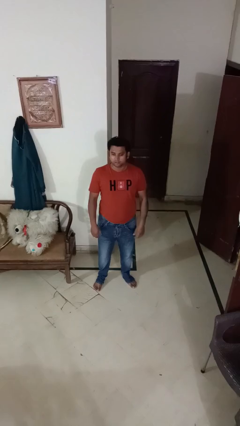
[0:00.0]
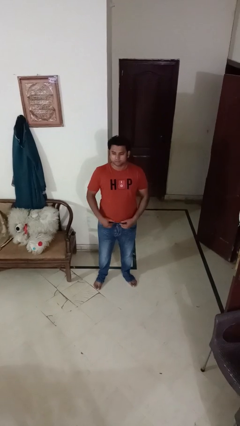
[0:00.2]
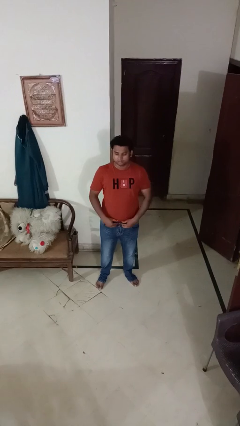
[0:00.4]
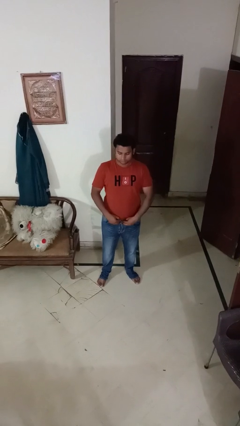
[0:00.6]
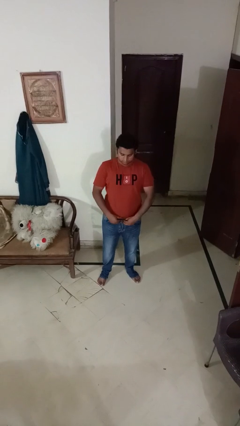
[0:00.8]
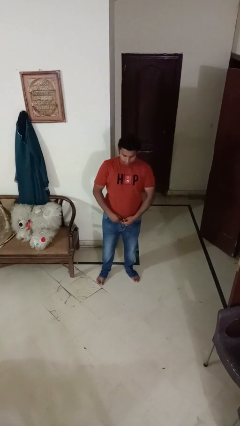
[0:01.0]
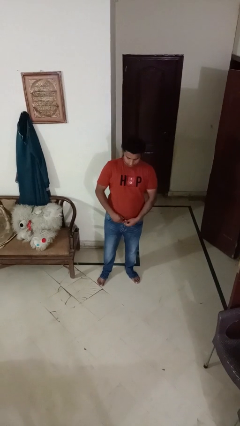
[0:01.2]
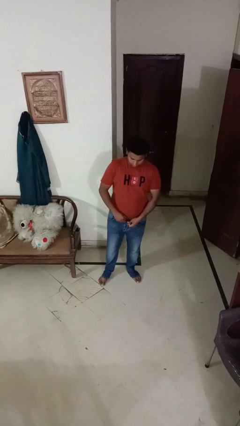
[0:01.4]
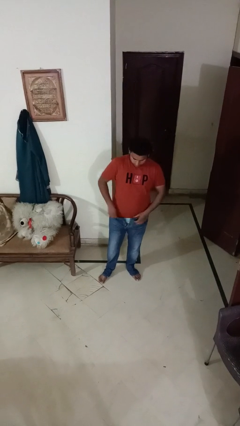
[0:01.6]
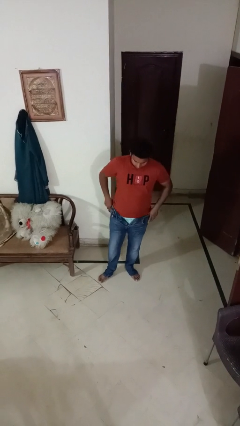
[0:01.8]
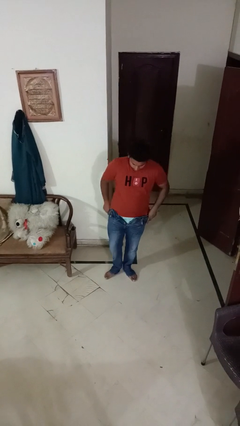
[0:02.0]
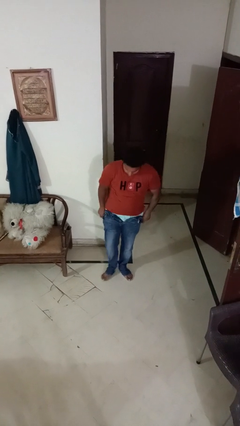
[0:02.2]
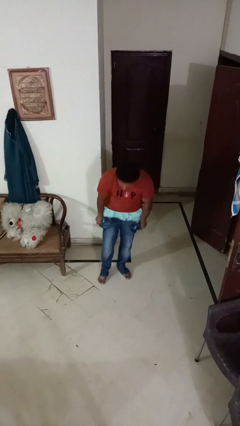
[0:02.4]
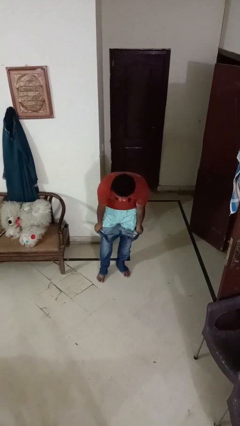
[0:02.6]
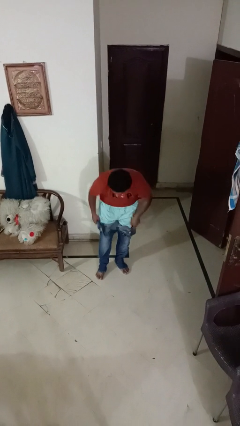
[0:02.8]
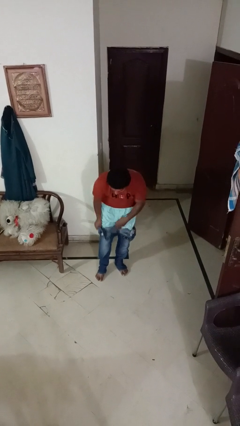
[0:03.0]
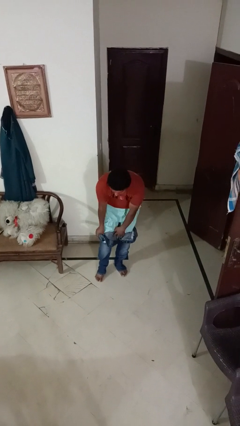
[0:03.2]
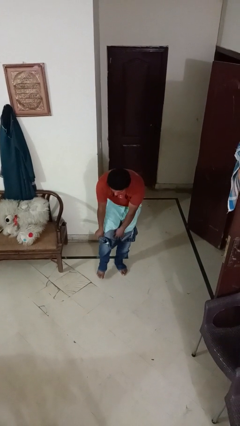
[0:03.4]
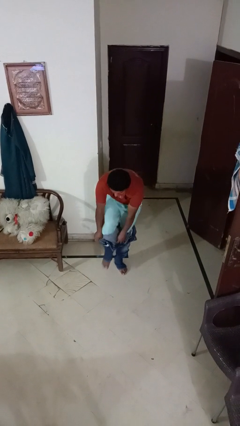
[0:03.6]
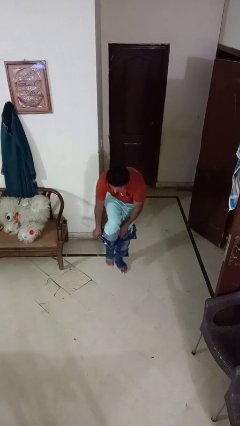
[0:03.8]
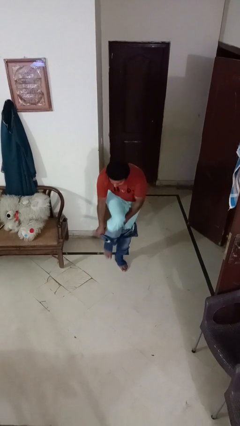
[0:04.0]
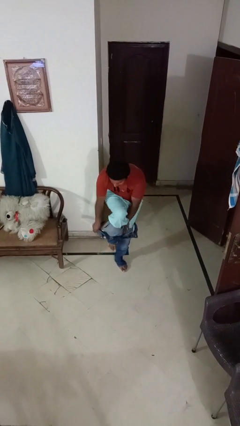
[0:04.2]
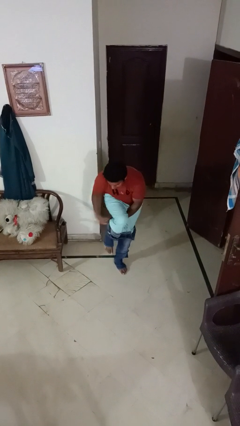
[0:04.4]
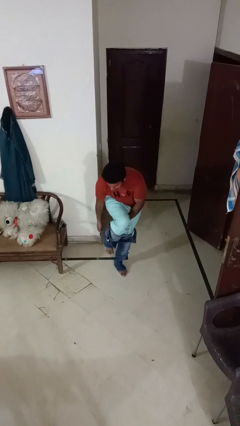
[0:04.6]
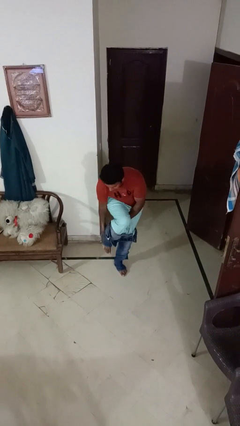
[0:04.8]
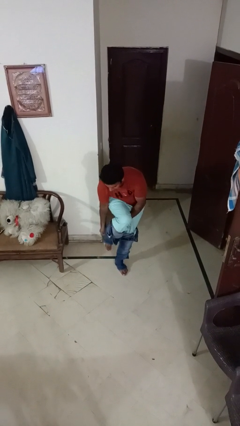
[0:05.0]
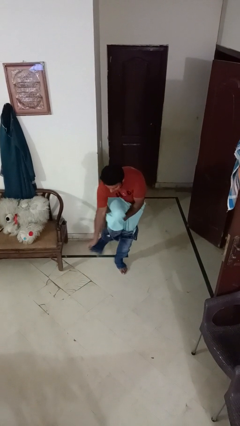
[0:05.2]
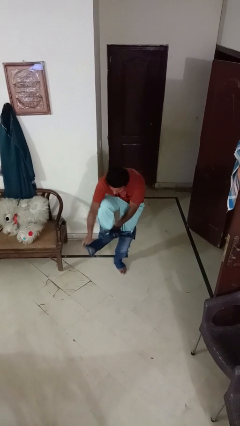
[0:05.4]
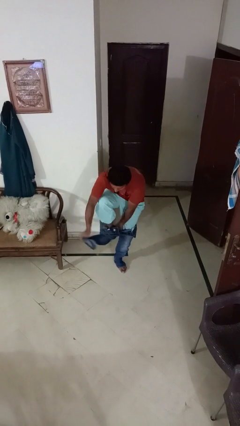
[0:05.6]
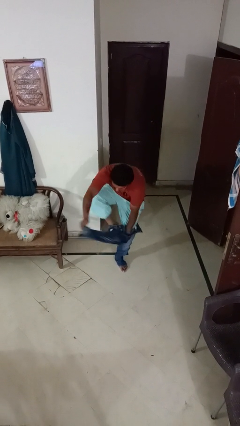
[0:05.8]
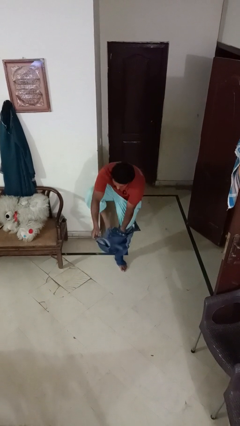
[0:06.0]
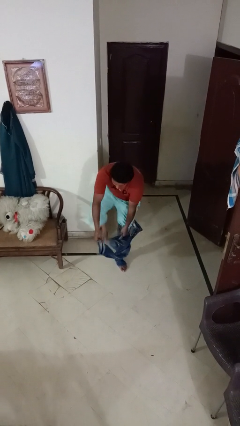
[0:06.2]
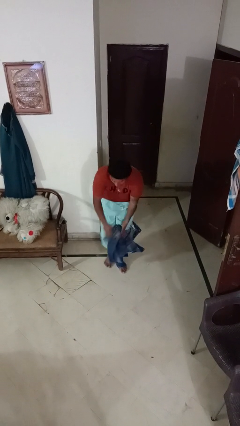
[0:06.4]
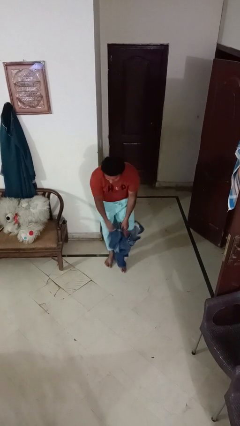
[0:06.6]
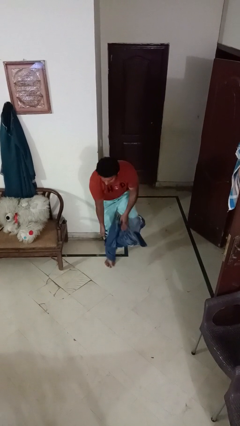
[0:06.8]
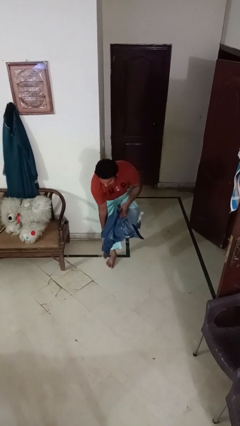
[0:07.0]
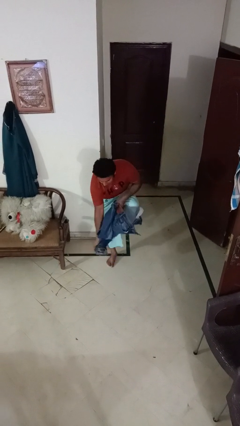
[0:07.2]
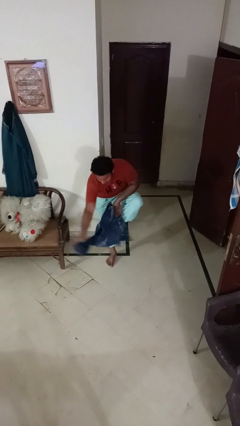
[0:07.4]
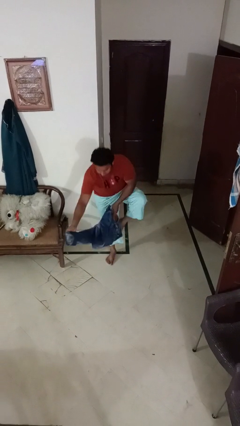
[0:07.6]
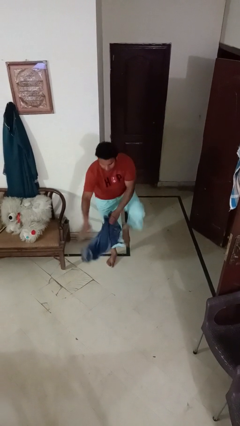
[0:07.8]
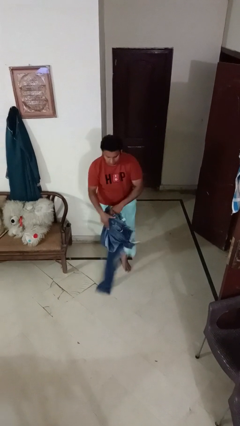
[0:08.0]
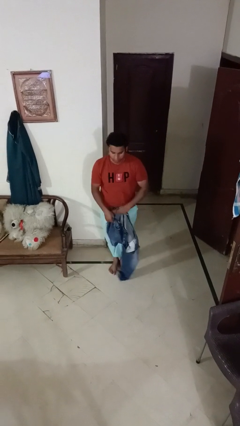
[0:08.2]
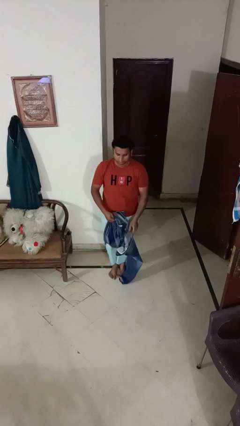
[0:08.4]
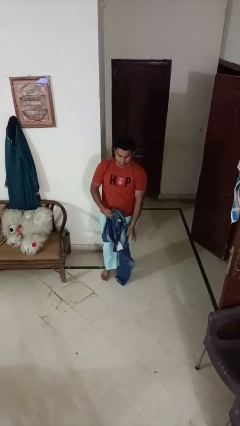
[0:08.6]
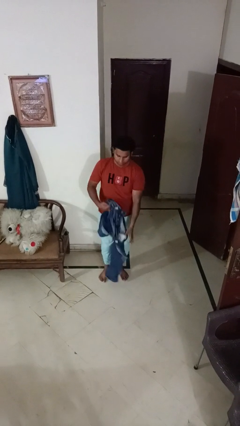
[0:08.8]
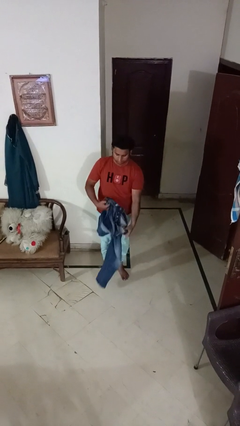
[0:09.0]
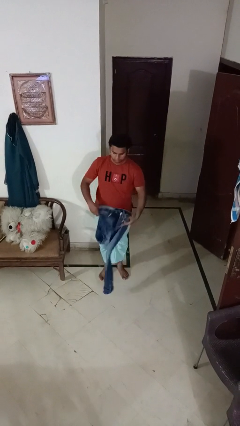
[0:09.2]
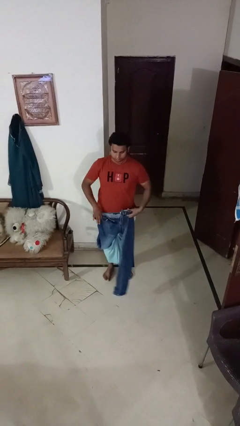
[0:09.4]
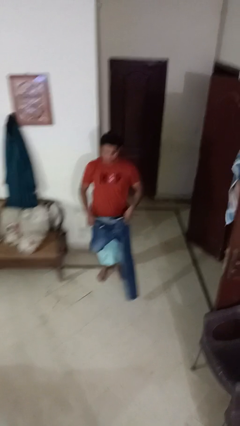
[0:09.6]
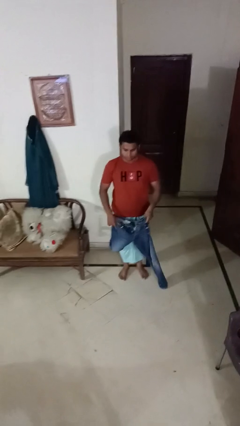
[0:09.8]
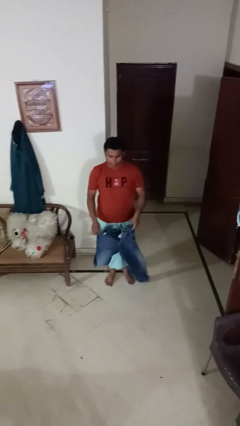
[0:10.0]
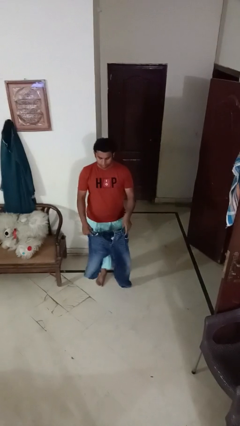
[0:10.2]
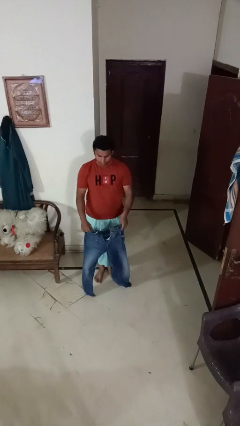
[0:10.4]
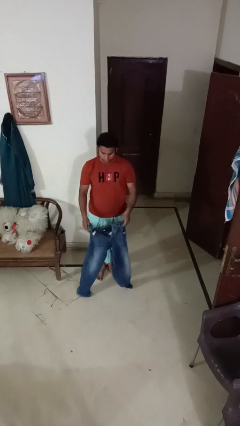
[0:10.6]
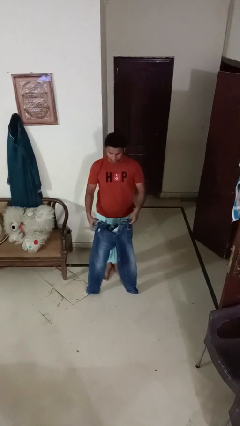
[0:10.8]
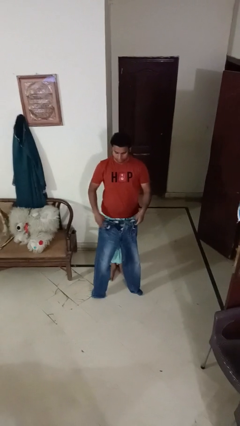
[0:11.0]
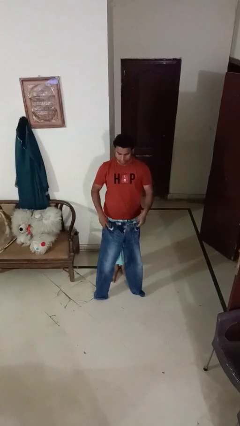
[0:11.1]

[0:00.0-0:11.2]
person takes off pants

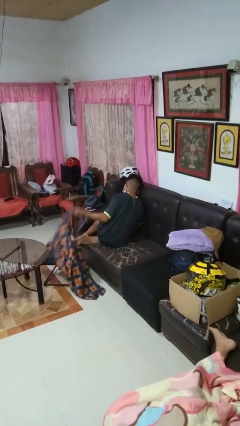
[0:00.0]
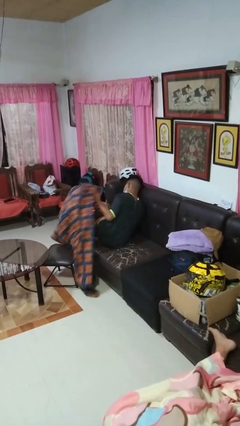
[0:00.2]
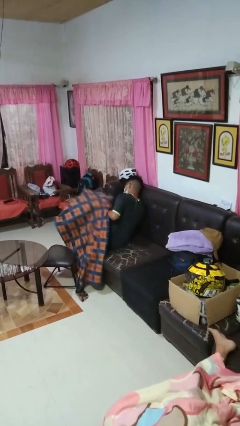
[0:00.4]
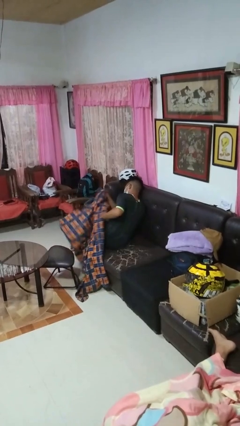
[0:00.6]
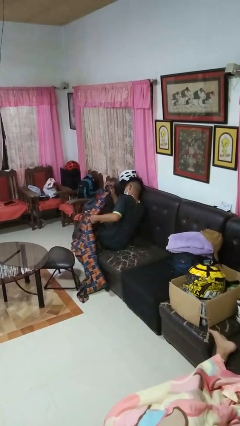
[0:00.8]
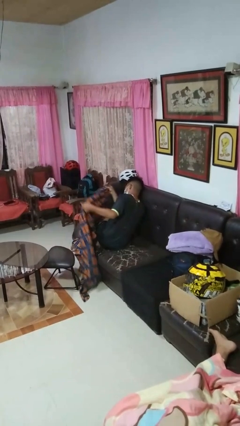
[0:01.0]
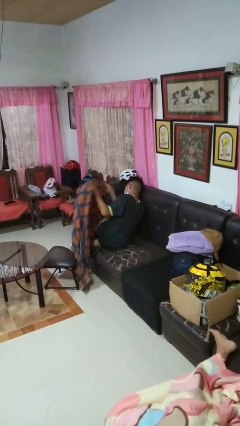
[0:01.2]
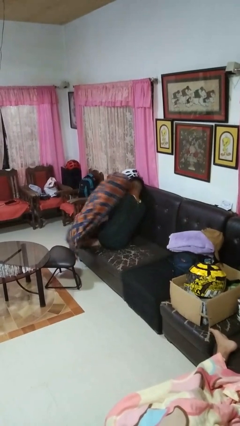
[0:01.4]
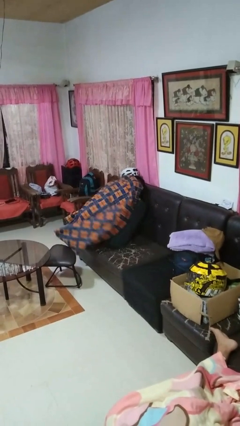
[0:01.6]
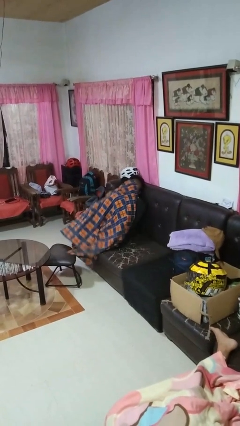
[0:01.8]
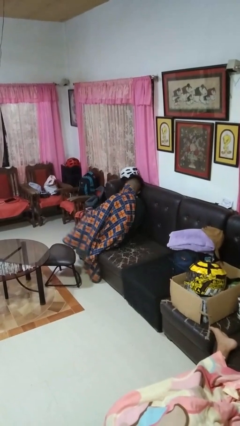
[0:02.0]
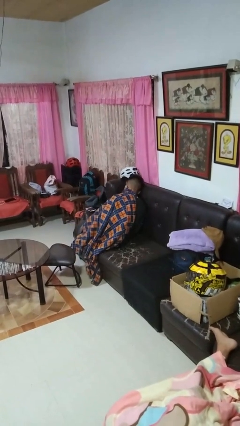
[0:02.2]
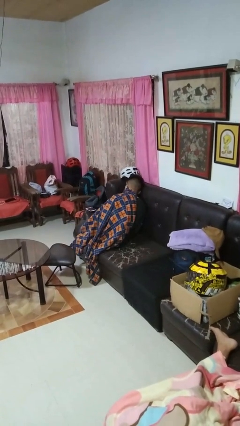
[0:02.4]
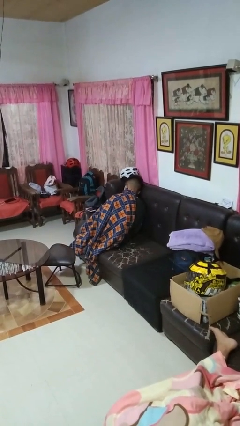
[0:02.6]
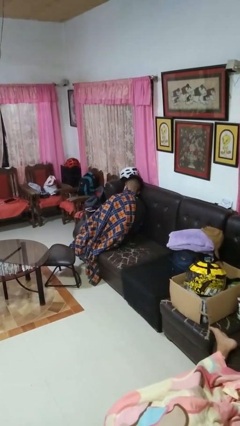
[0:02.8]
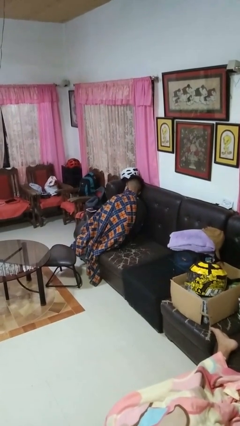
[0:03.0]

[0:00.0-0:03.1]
person covers with blanket

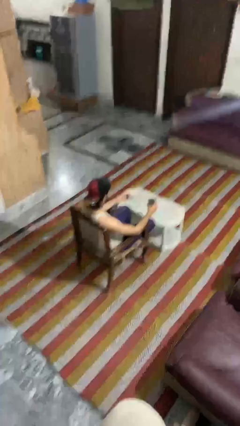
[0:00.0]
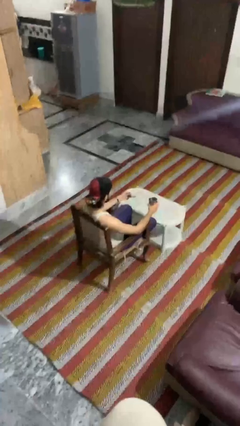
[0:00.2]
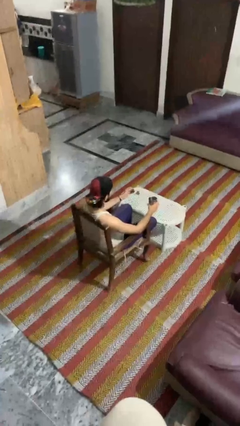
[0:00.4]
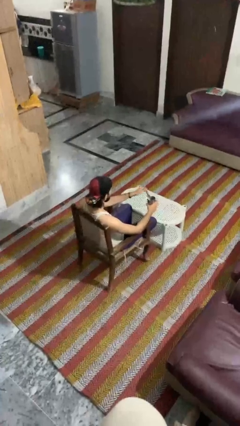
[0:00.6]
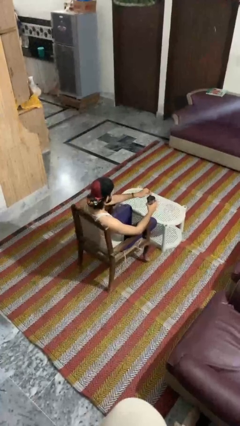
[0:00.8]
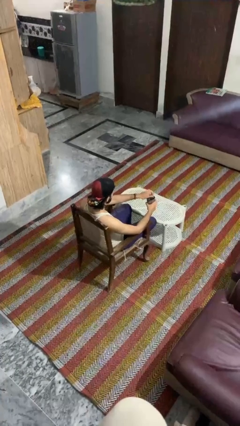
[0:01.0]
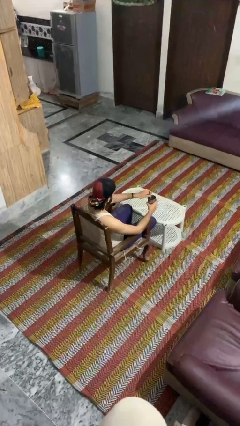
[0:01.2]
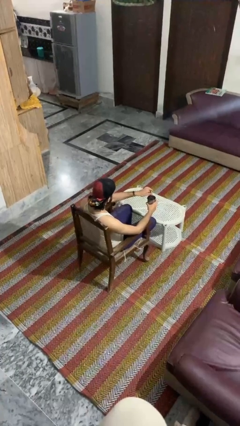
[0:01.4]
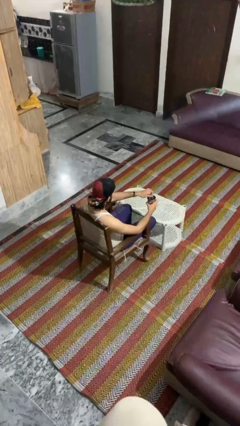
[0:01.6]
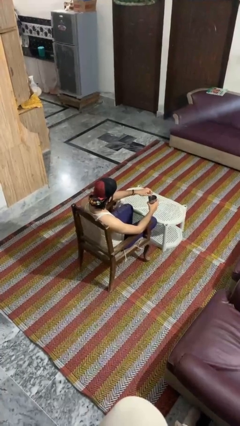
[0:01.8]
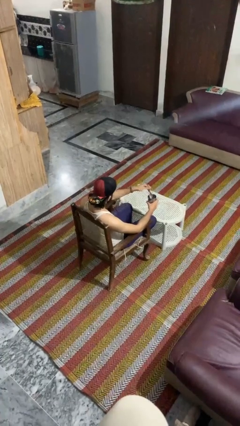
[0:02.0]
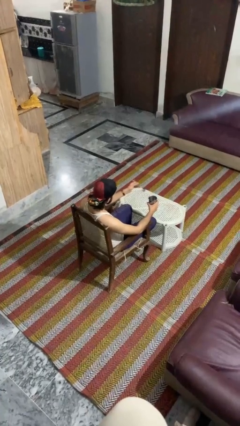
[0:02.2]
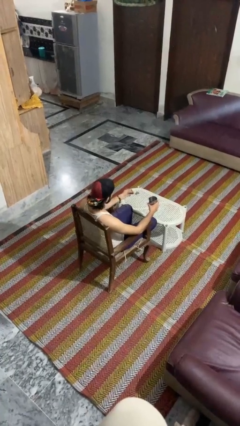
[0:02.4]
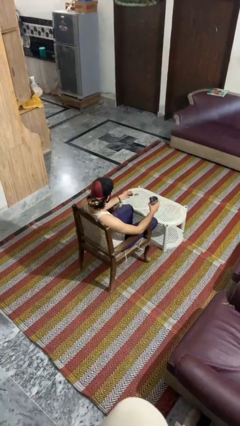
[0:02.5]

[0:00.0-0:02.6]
person stirs mug

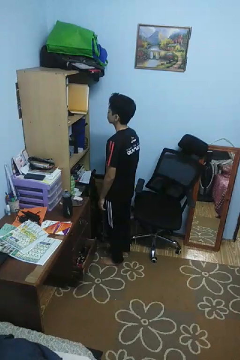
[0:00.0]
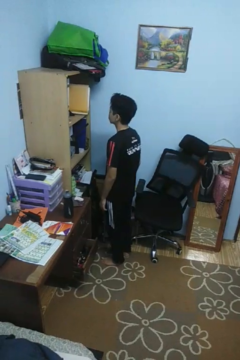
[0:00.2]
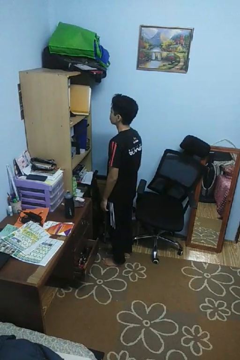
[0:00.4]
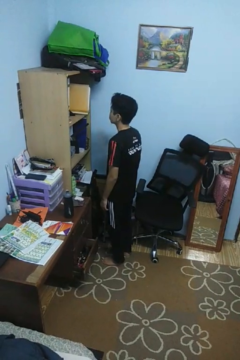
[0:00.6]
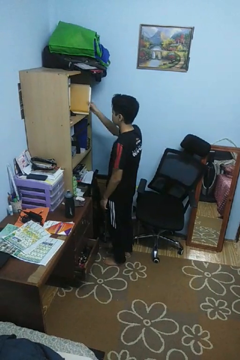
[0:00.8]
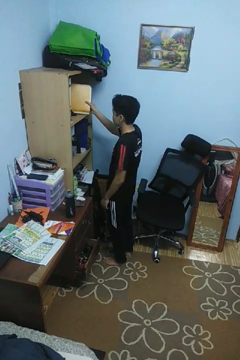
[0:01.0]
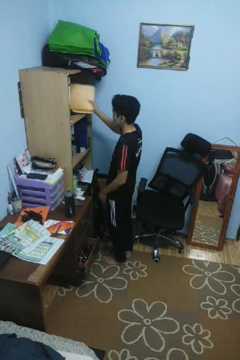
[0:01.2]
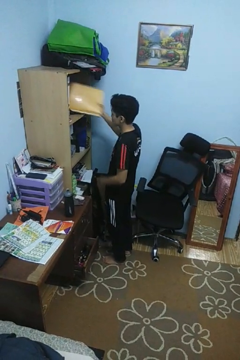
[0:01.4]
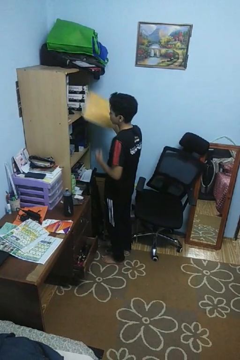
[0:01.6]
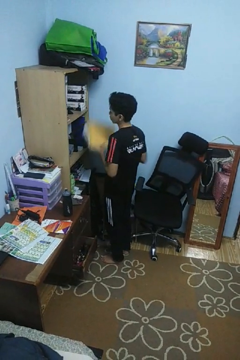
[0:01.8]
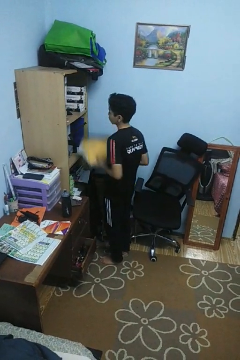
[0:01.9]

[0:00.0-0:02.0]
person picks up object from cabinet
